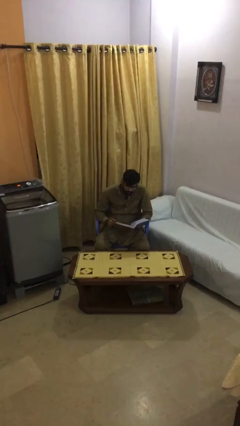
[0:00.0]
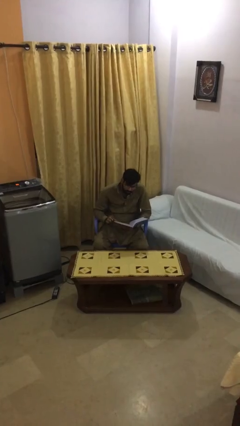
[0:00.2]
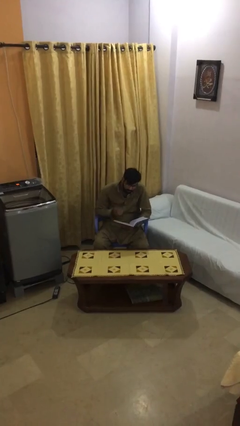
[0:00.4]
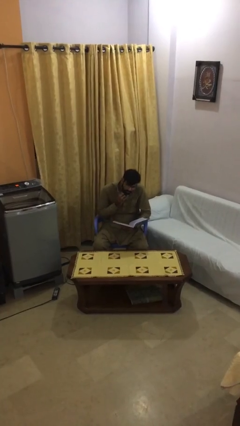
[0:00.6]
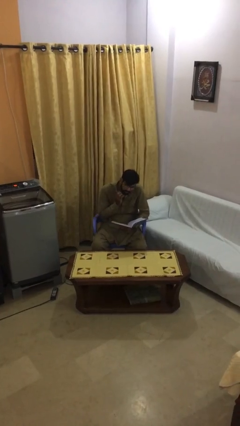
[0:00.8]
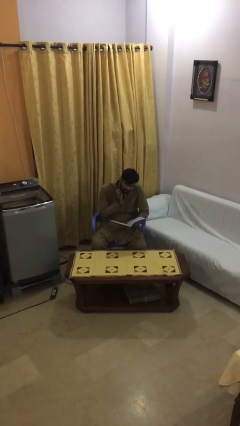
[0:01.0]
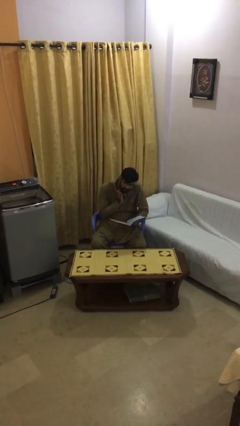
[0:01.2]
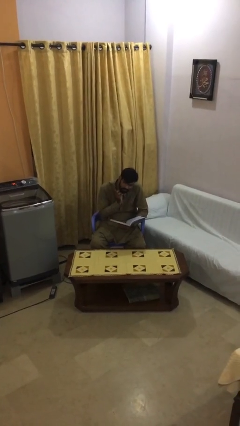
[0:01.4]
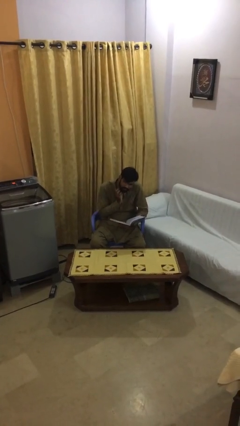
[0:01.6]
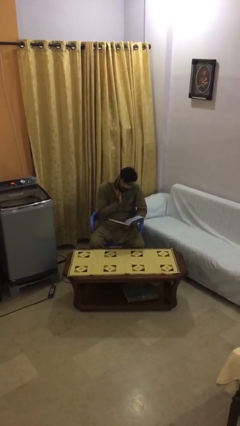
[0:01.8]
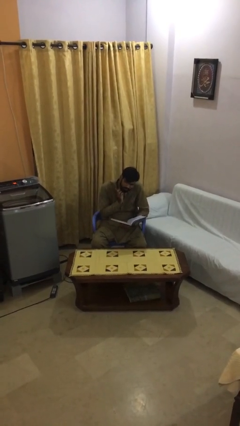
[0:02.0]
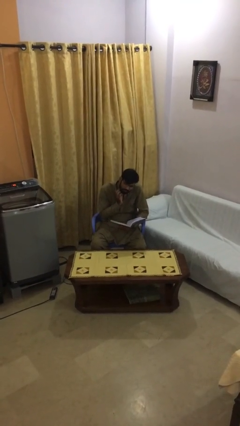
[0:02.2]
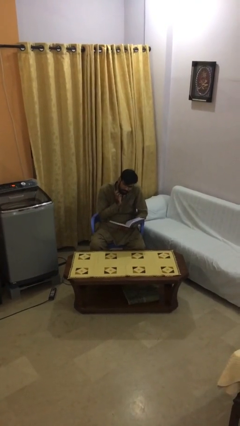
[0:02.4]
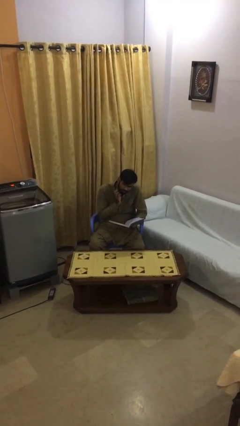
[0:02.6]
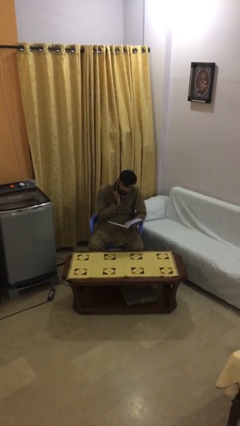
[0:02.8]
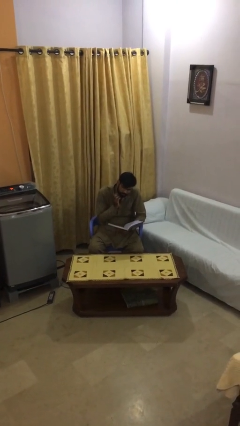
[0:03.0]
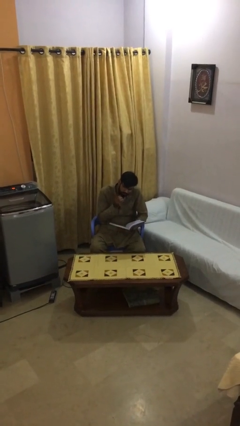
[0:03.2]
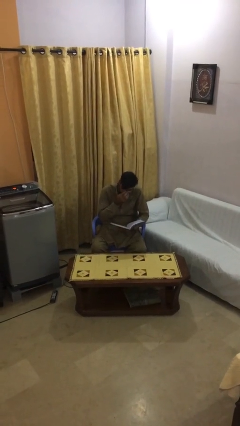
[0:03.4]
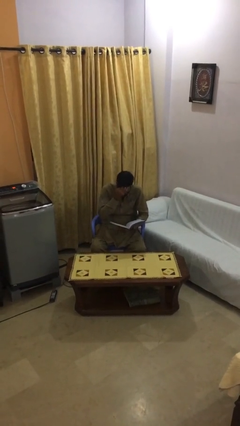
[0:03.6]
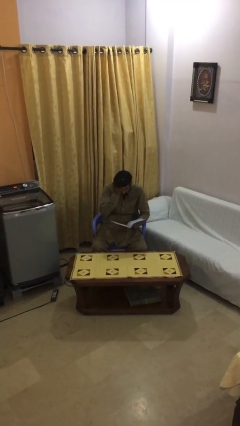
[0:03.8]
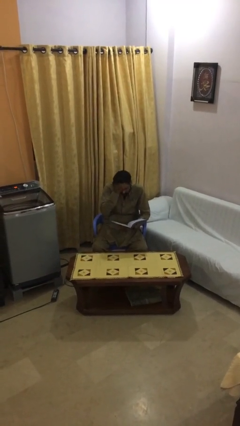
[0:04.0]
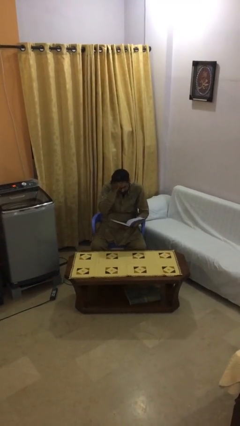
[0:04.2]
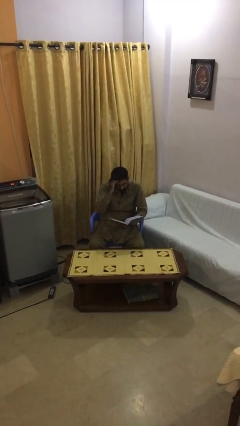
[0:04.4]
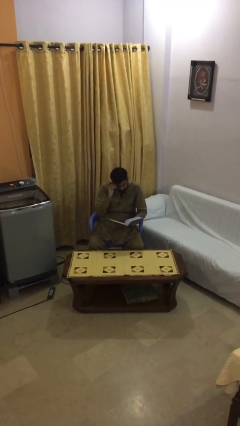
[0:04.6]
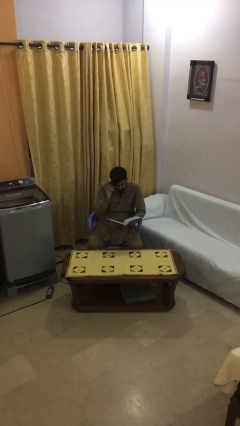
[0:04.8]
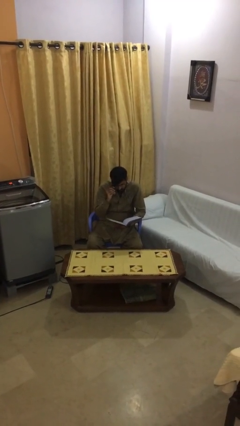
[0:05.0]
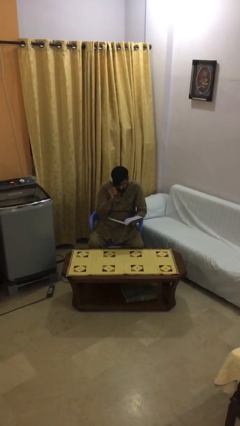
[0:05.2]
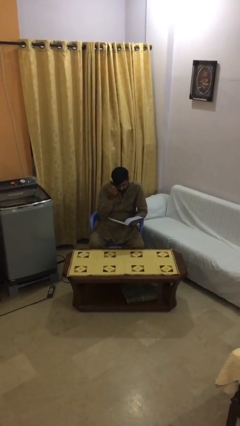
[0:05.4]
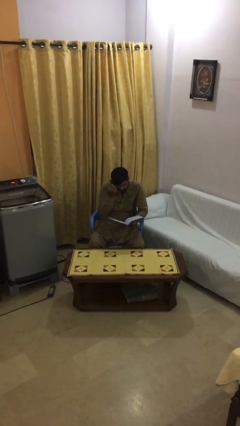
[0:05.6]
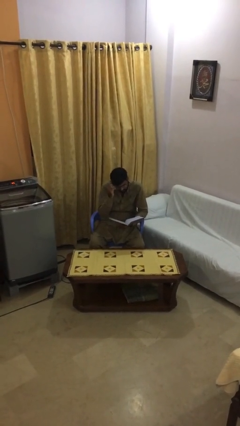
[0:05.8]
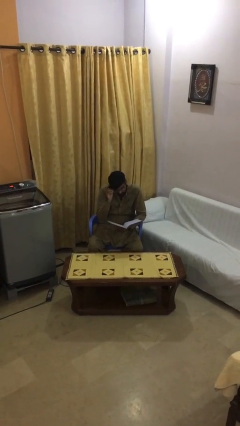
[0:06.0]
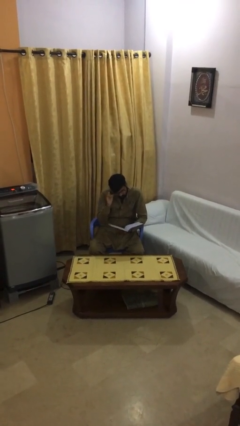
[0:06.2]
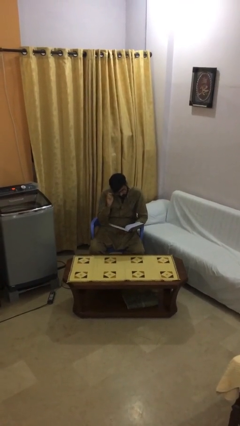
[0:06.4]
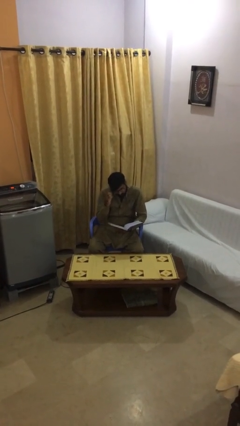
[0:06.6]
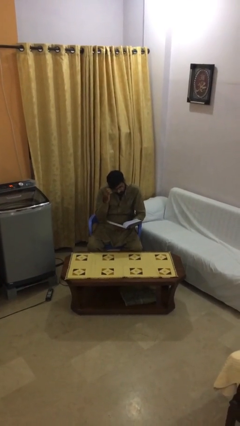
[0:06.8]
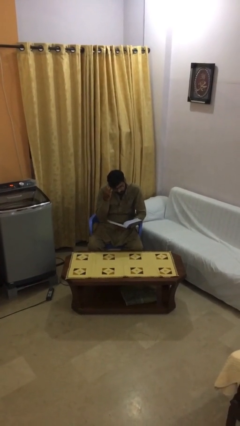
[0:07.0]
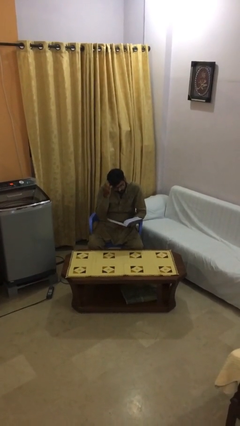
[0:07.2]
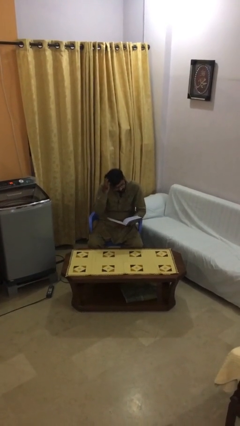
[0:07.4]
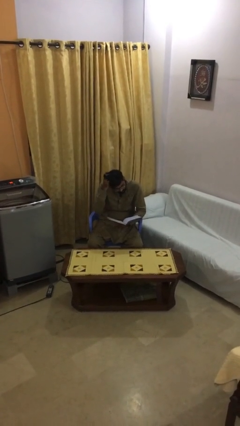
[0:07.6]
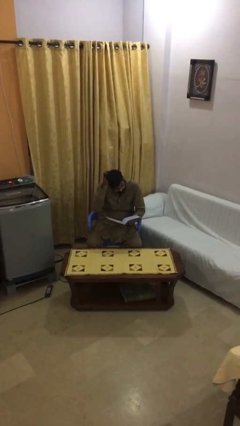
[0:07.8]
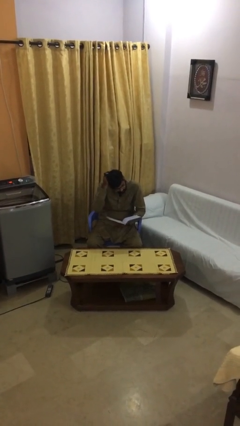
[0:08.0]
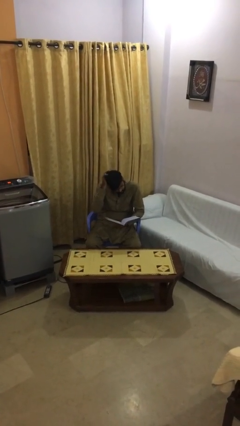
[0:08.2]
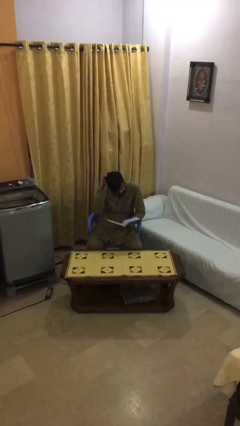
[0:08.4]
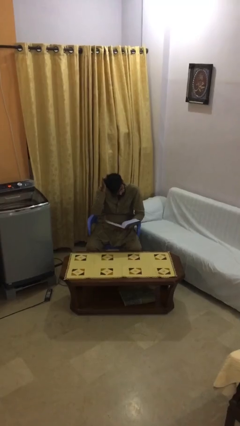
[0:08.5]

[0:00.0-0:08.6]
person reads document

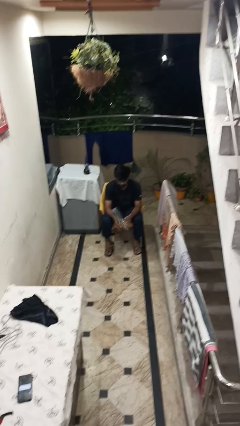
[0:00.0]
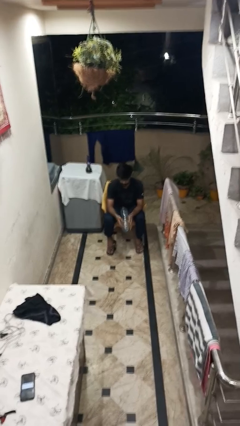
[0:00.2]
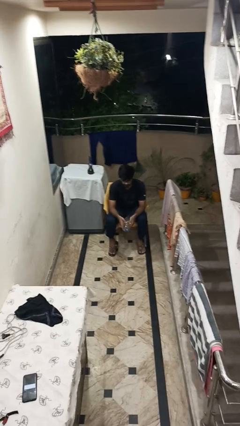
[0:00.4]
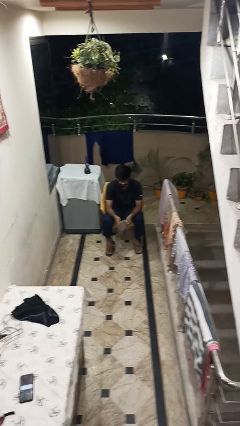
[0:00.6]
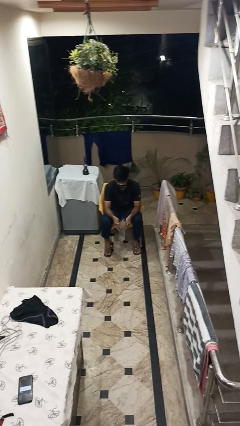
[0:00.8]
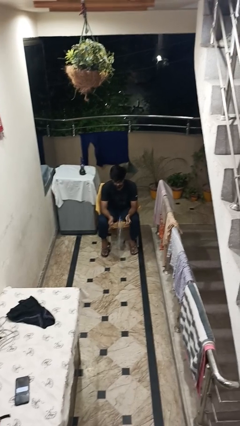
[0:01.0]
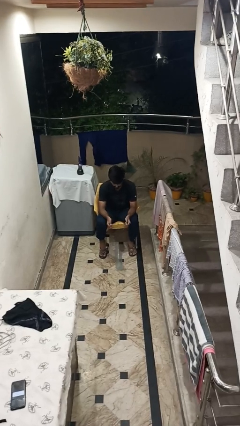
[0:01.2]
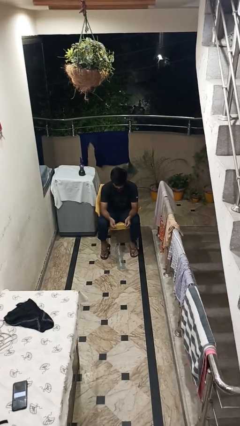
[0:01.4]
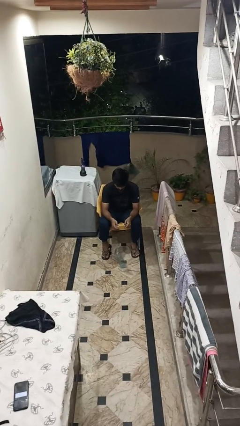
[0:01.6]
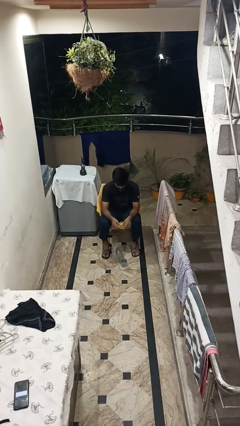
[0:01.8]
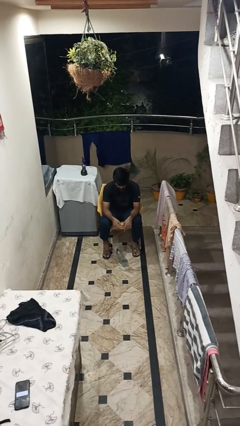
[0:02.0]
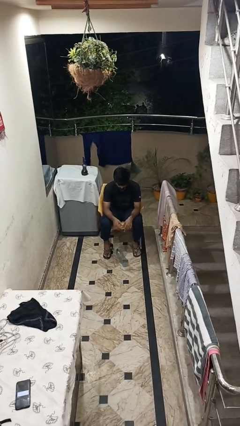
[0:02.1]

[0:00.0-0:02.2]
person drops object

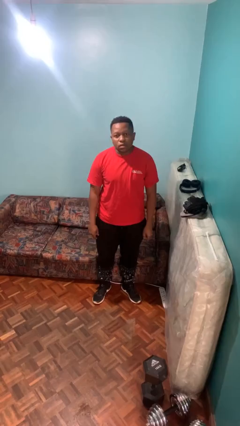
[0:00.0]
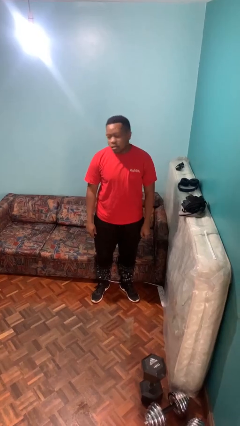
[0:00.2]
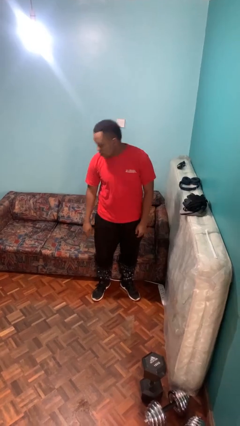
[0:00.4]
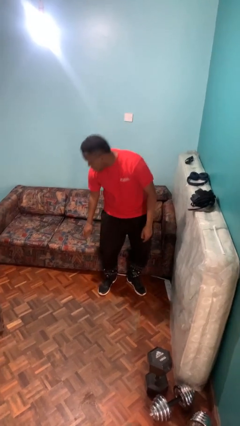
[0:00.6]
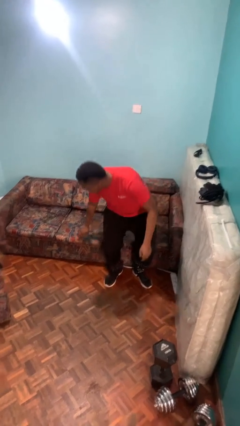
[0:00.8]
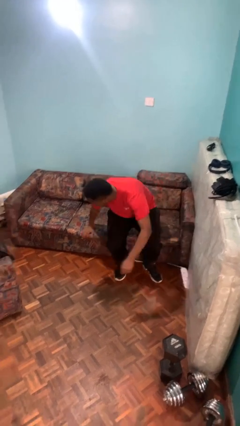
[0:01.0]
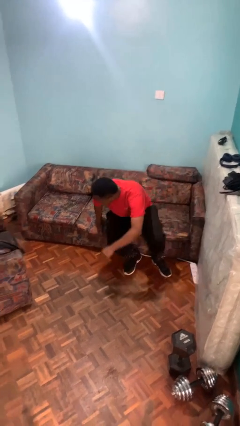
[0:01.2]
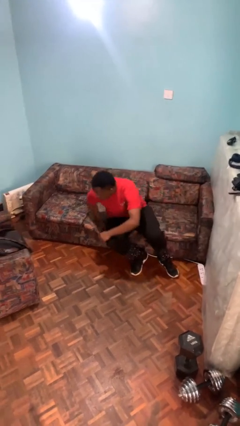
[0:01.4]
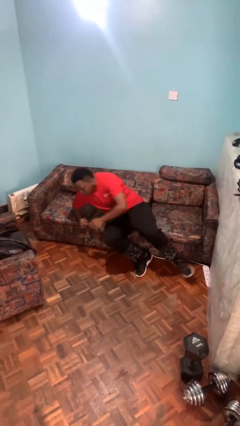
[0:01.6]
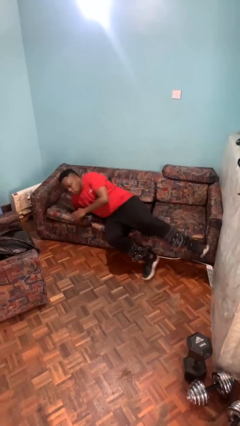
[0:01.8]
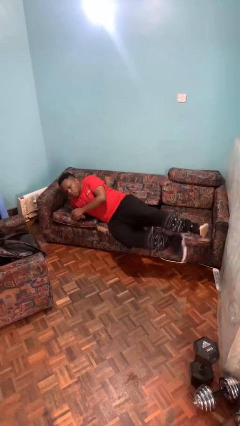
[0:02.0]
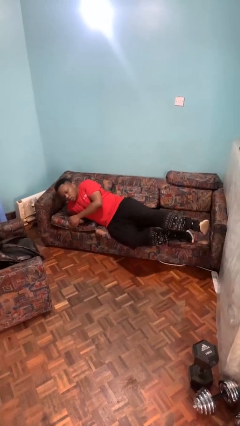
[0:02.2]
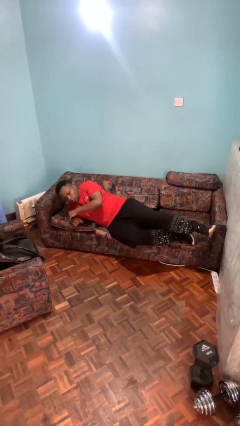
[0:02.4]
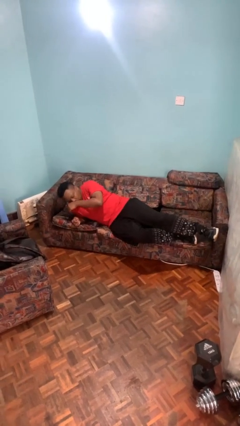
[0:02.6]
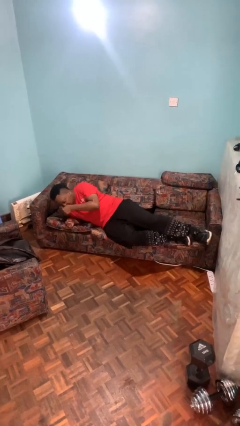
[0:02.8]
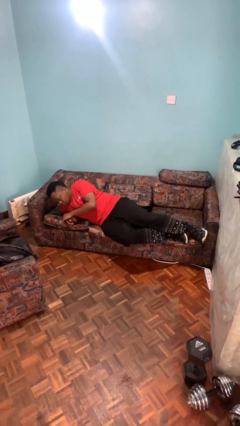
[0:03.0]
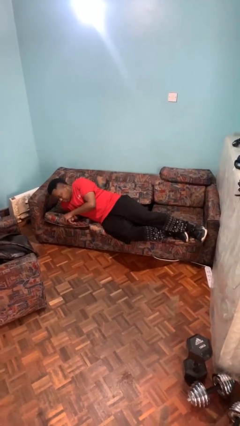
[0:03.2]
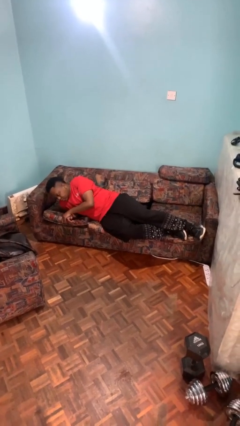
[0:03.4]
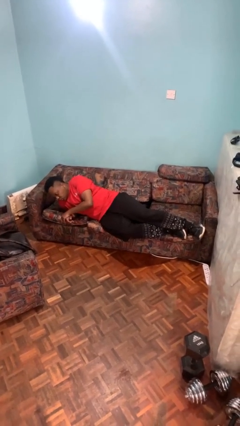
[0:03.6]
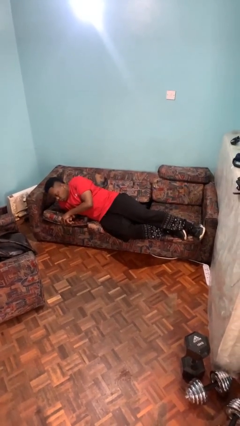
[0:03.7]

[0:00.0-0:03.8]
person lies down on couch

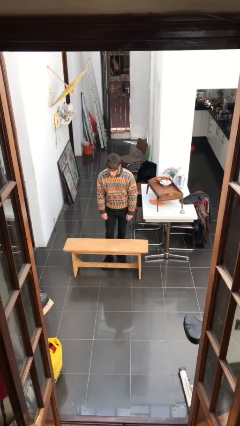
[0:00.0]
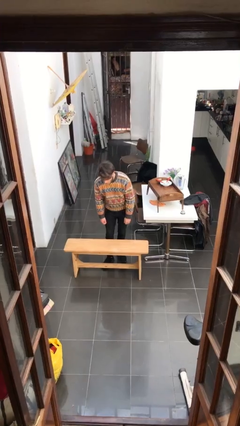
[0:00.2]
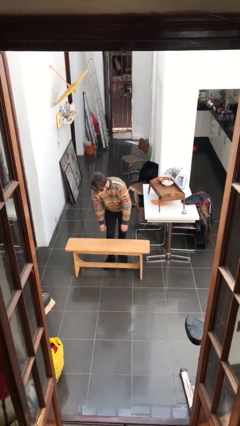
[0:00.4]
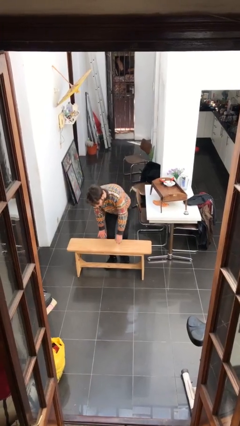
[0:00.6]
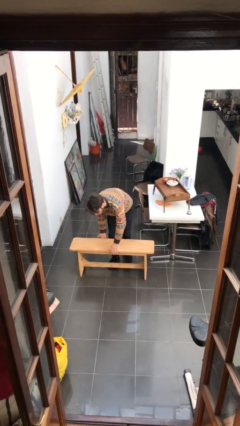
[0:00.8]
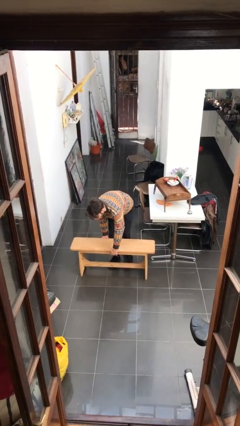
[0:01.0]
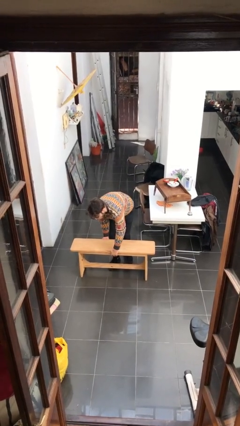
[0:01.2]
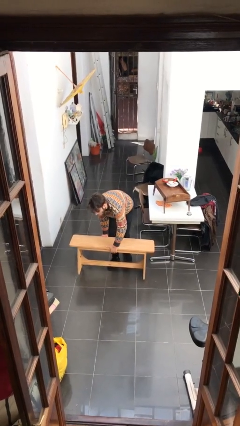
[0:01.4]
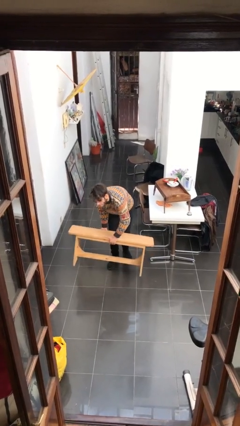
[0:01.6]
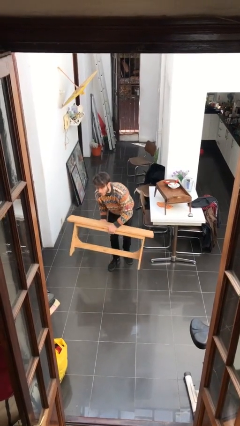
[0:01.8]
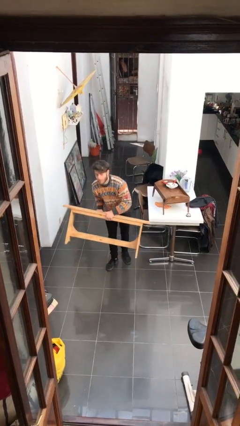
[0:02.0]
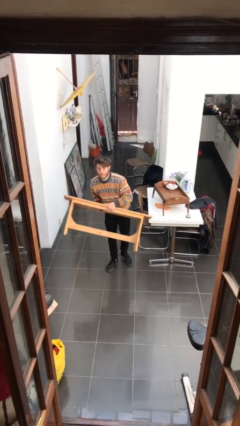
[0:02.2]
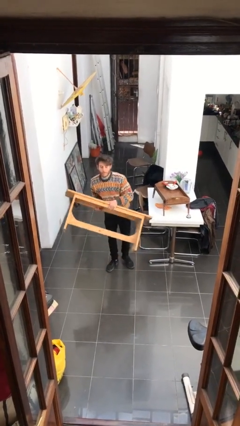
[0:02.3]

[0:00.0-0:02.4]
person picks up object from floor

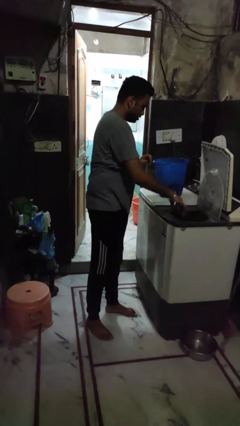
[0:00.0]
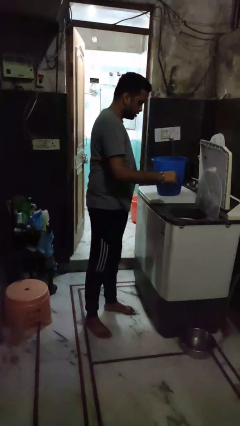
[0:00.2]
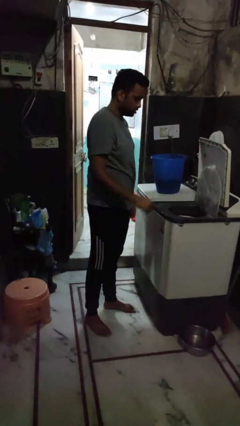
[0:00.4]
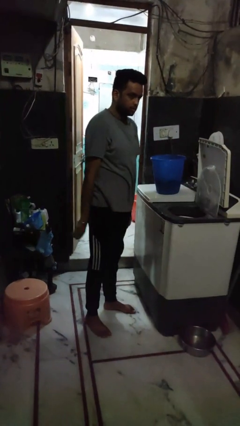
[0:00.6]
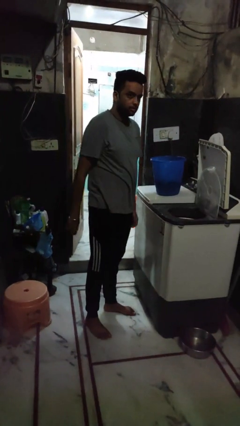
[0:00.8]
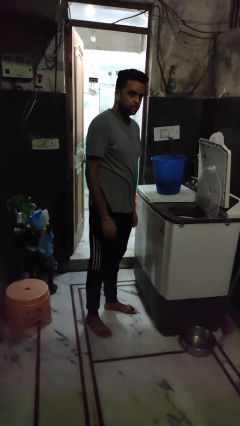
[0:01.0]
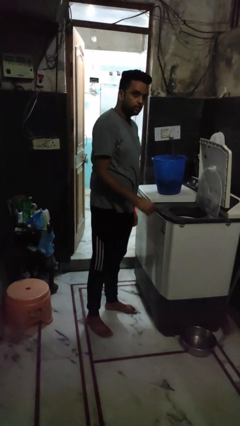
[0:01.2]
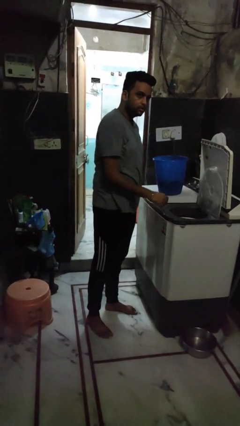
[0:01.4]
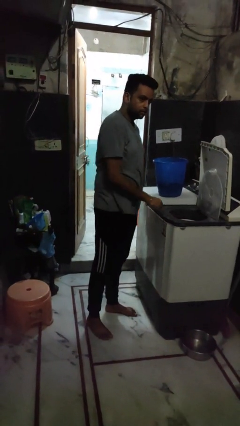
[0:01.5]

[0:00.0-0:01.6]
person loads dryer
